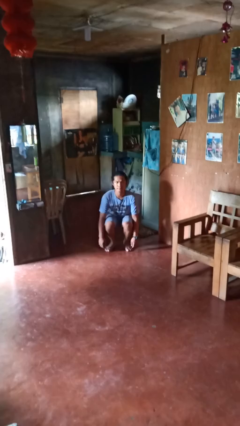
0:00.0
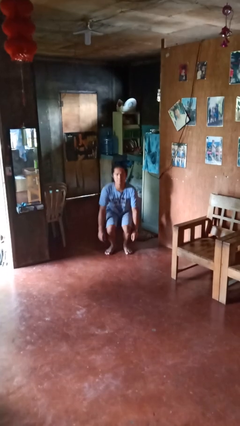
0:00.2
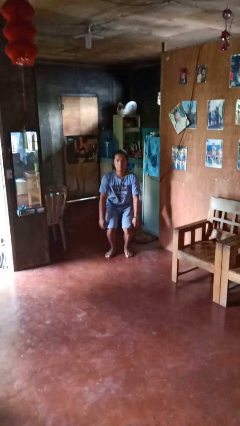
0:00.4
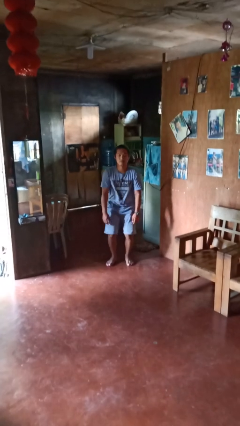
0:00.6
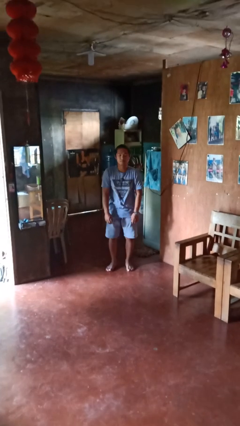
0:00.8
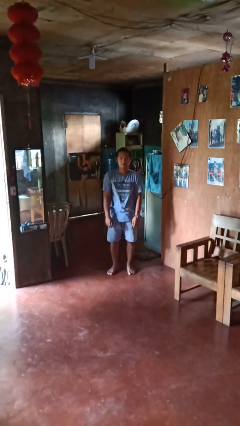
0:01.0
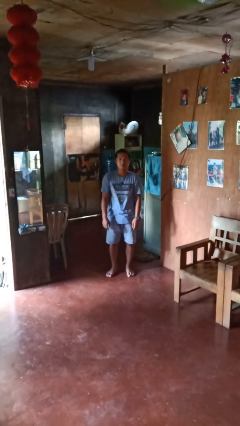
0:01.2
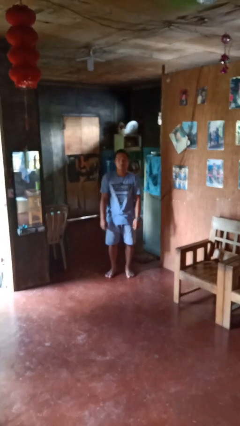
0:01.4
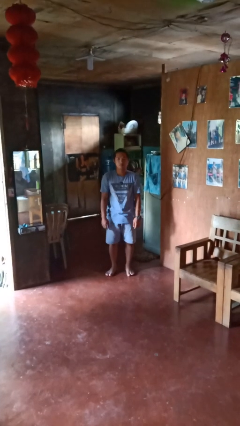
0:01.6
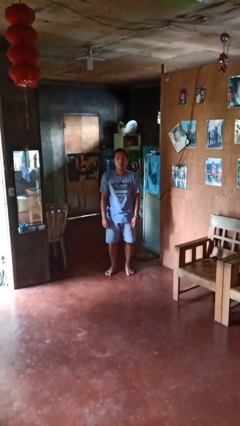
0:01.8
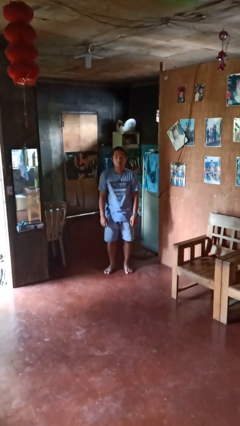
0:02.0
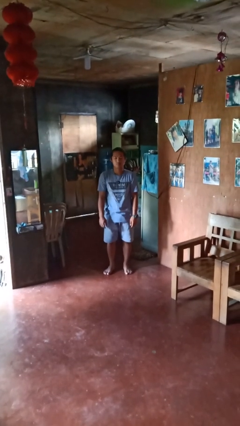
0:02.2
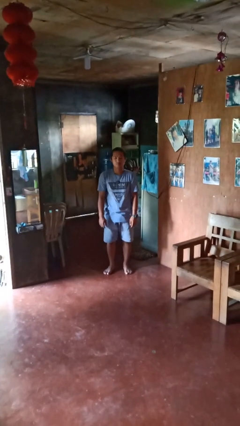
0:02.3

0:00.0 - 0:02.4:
person stands up

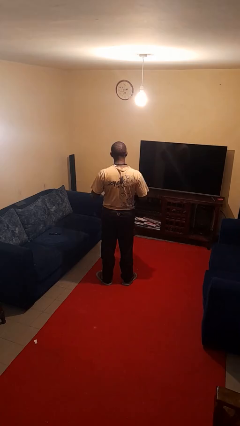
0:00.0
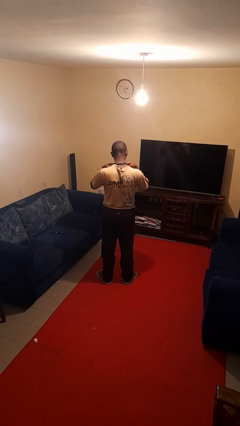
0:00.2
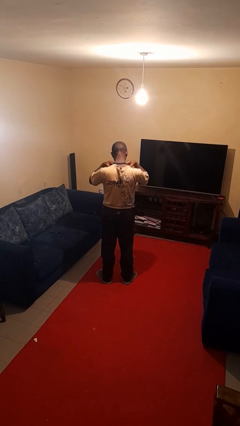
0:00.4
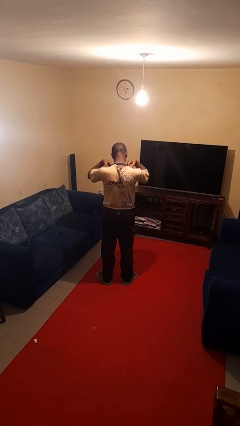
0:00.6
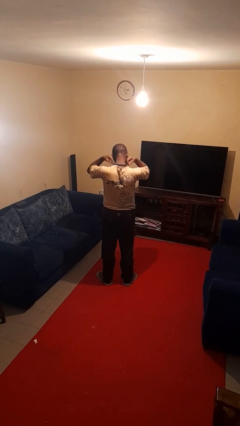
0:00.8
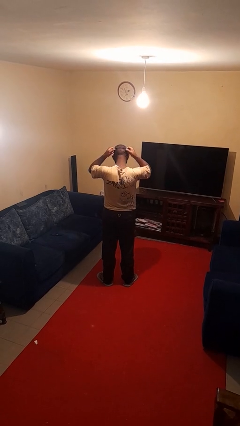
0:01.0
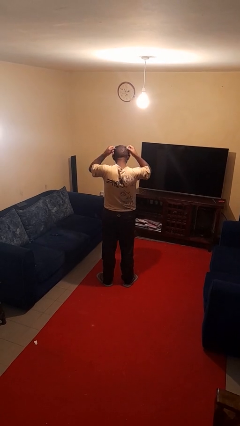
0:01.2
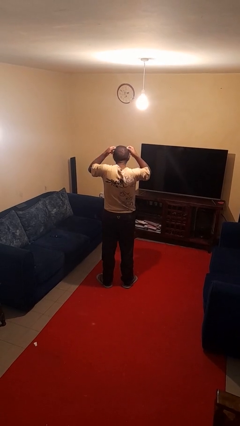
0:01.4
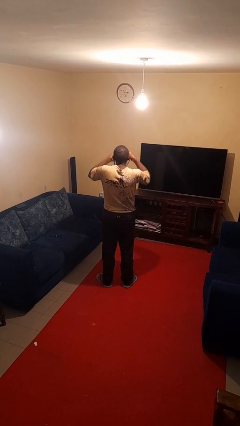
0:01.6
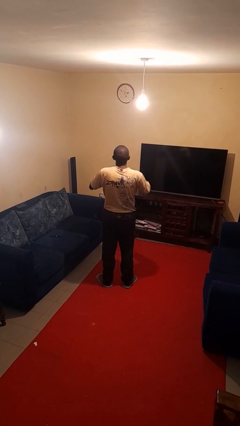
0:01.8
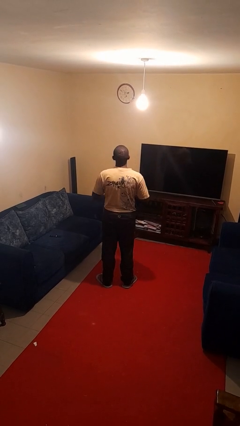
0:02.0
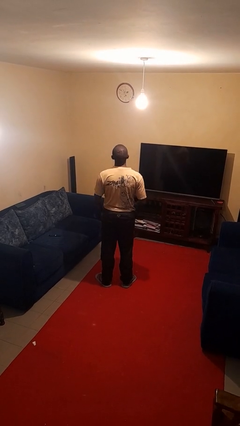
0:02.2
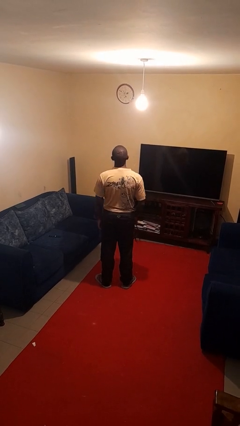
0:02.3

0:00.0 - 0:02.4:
person takes off necklace

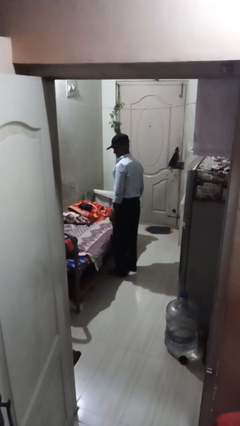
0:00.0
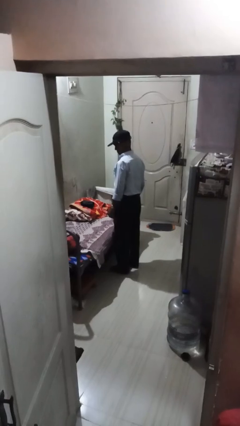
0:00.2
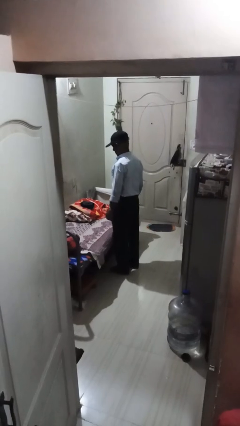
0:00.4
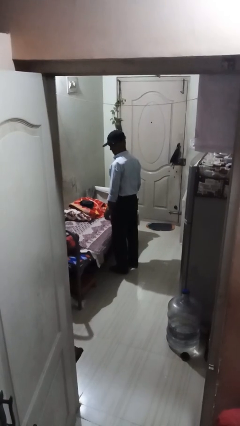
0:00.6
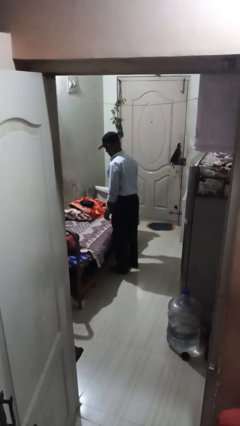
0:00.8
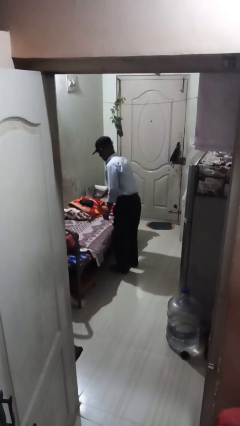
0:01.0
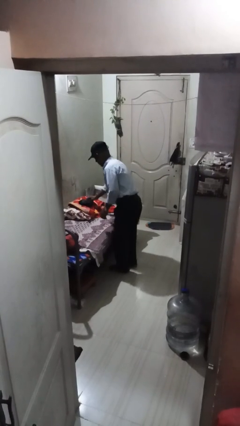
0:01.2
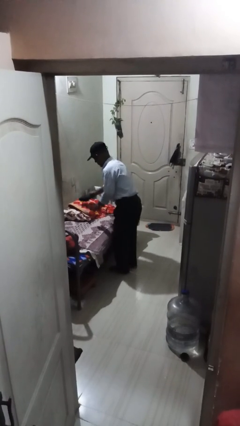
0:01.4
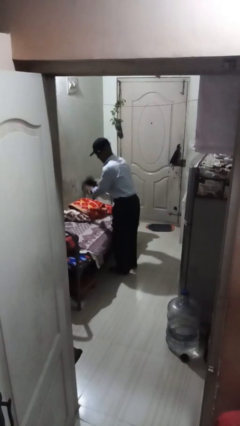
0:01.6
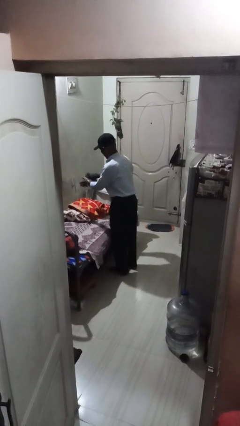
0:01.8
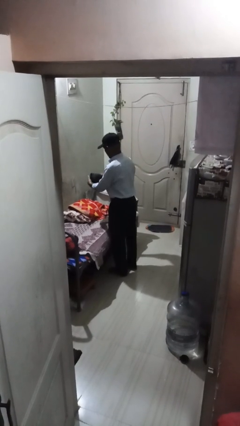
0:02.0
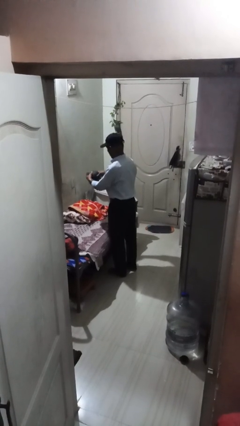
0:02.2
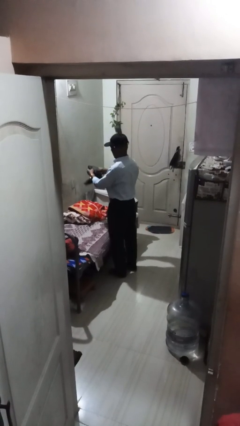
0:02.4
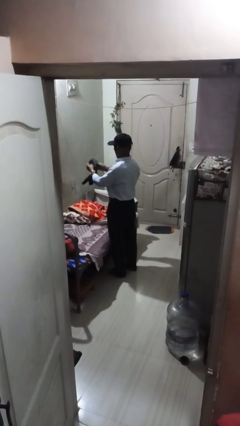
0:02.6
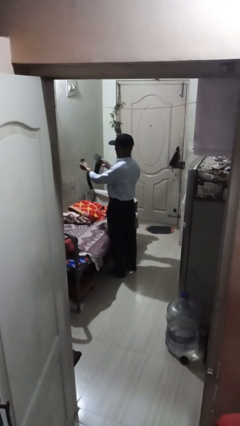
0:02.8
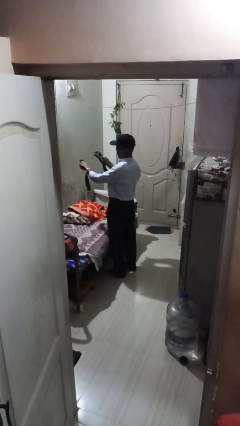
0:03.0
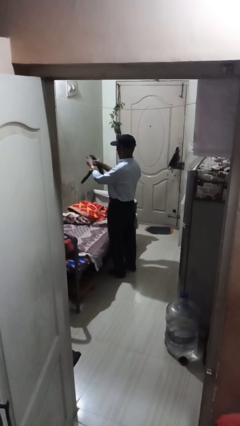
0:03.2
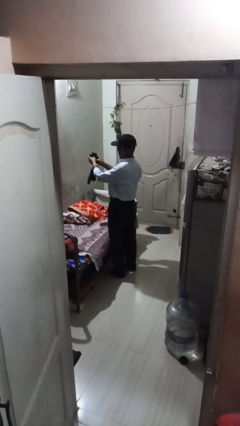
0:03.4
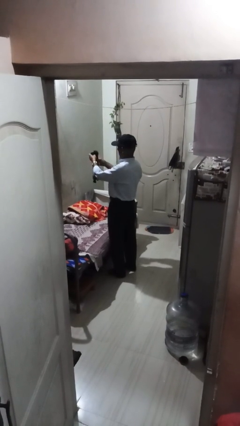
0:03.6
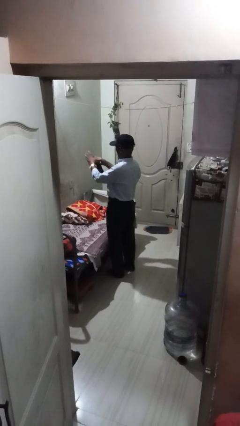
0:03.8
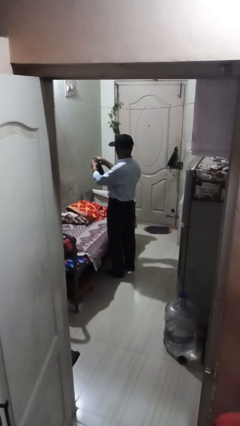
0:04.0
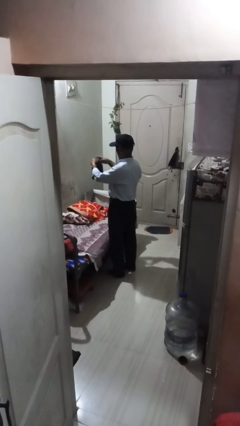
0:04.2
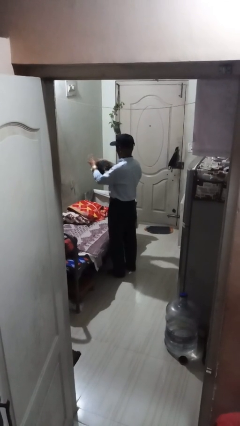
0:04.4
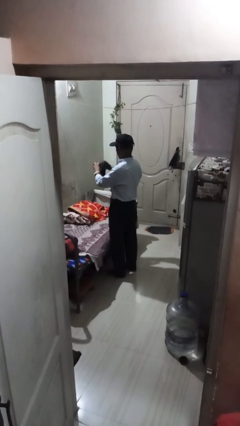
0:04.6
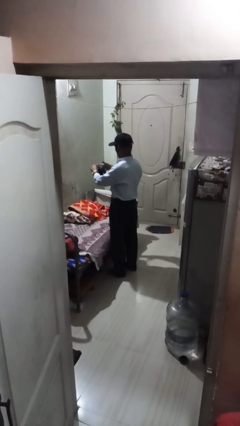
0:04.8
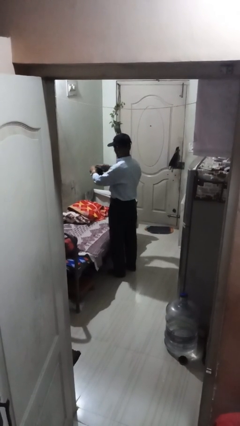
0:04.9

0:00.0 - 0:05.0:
person folds socks

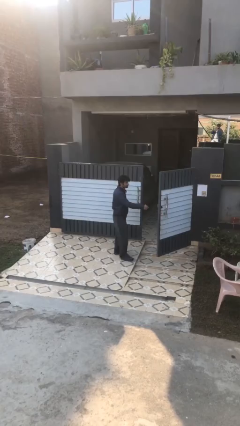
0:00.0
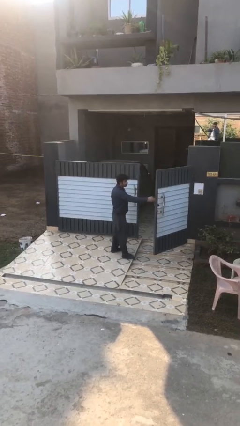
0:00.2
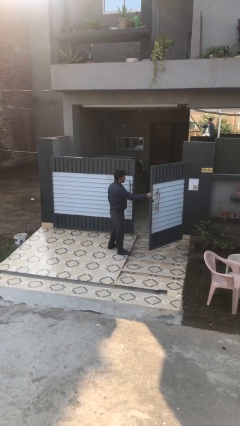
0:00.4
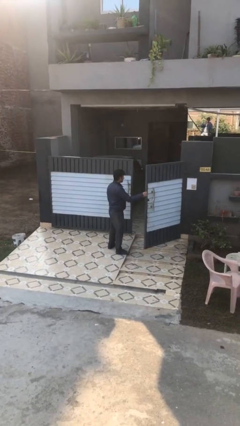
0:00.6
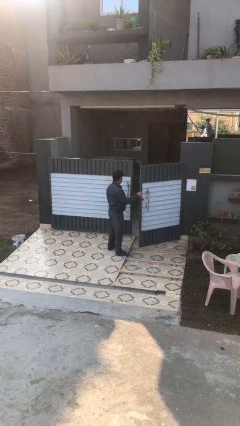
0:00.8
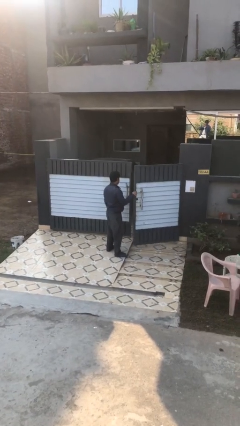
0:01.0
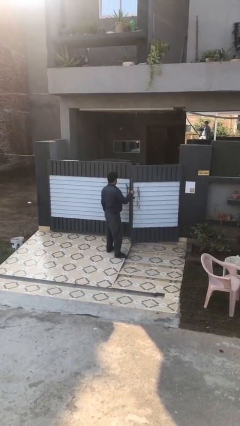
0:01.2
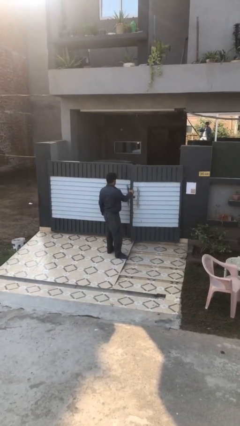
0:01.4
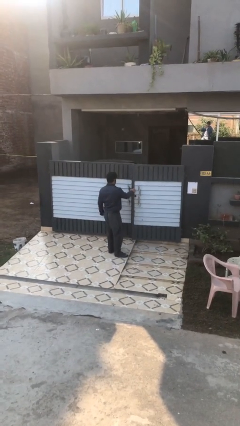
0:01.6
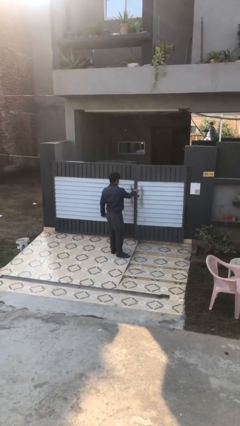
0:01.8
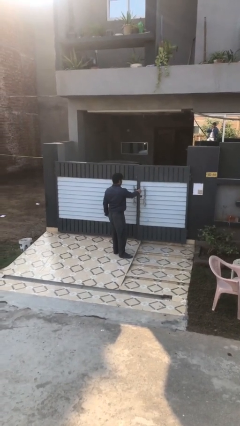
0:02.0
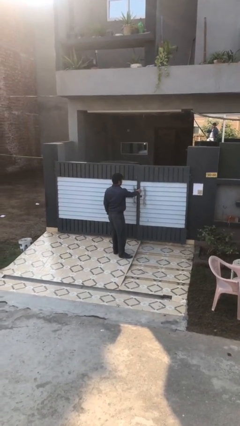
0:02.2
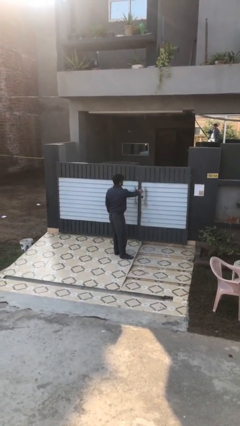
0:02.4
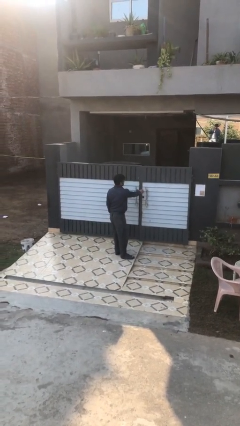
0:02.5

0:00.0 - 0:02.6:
person closes facility door

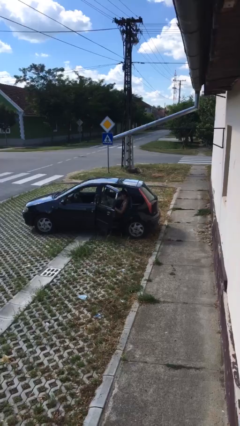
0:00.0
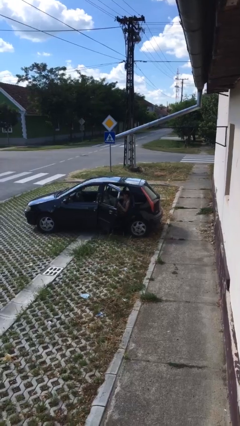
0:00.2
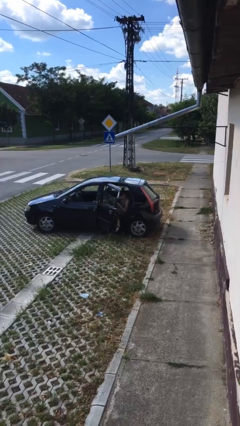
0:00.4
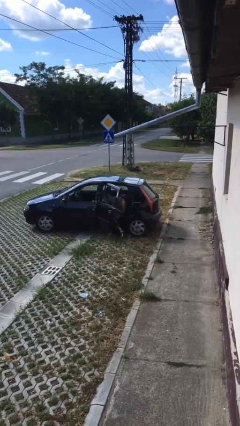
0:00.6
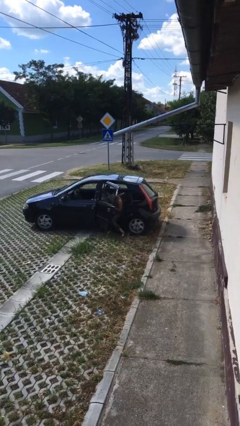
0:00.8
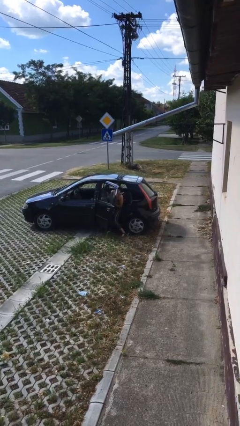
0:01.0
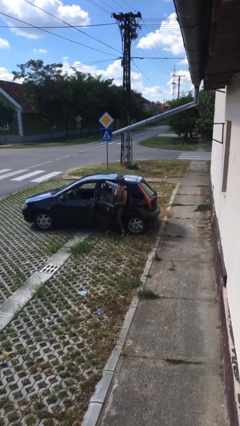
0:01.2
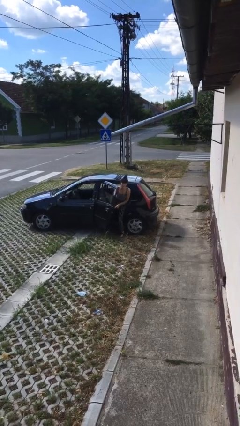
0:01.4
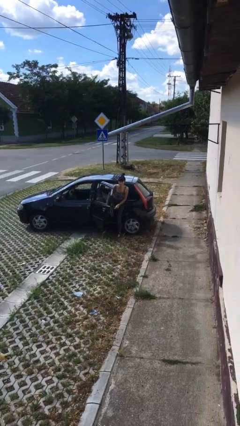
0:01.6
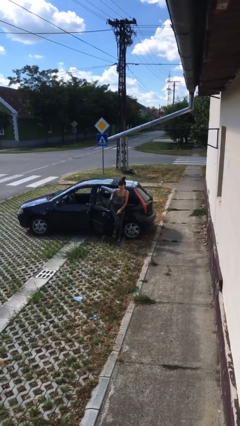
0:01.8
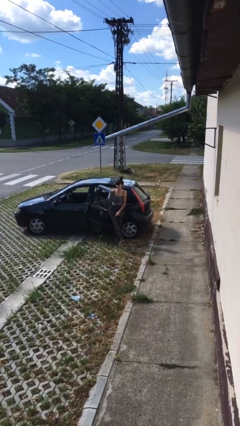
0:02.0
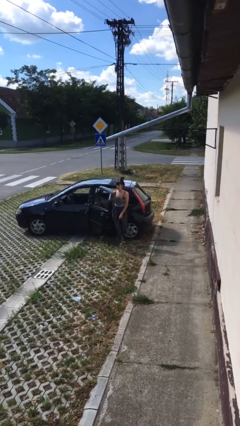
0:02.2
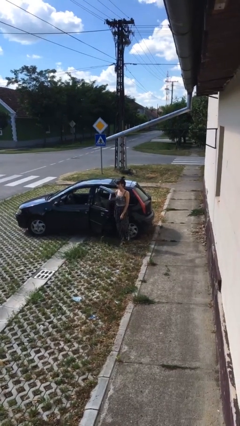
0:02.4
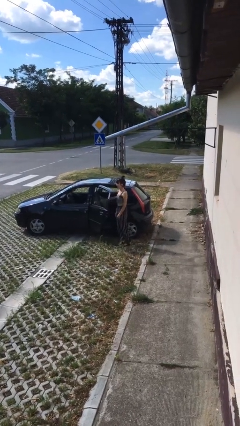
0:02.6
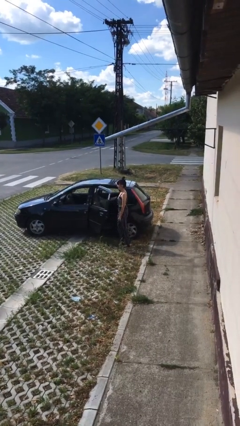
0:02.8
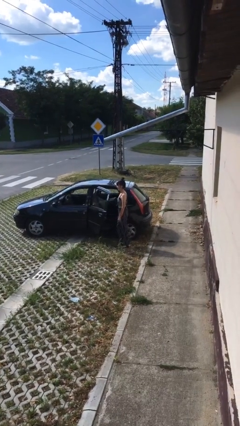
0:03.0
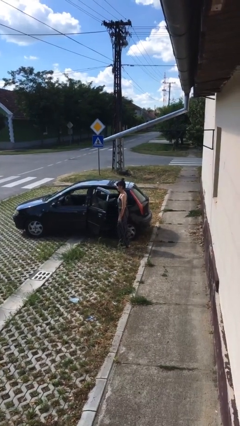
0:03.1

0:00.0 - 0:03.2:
person exits car

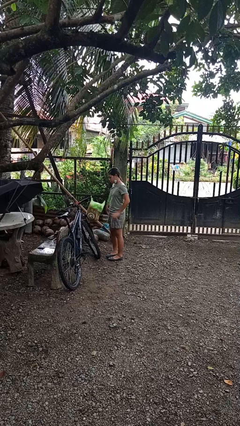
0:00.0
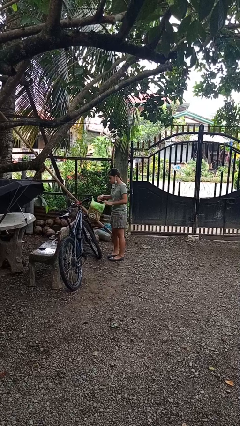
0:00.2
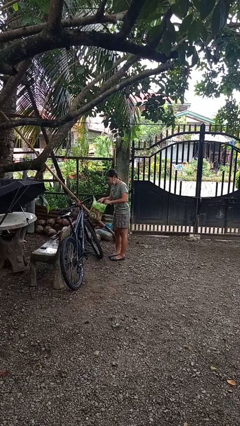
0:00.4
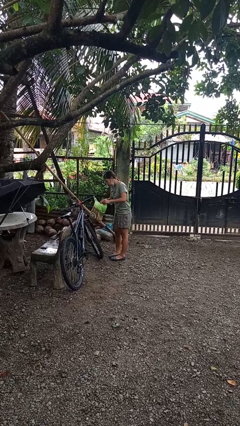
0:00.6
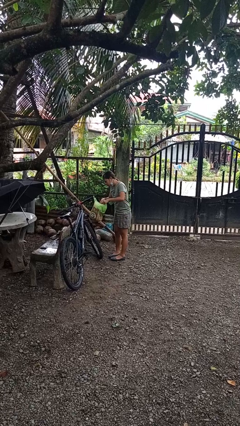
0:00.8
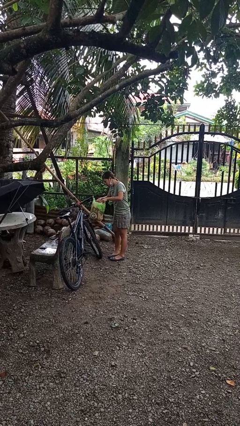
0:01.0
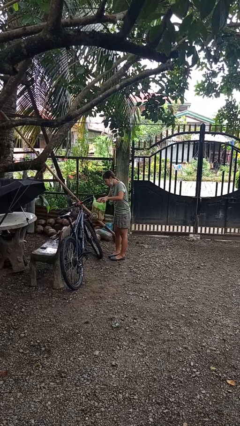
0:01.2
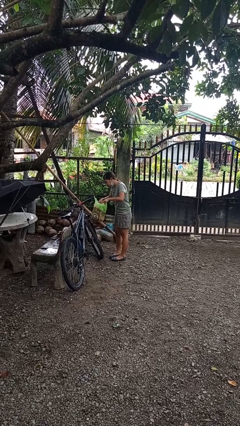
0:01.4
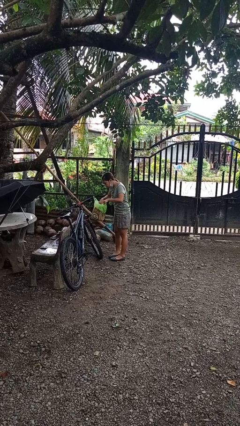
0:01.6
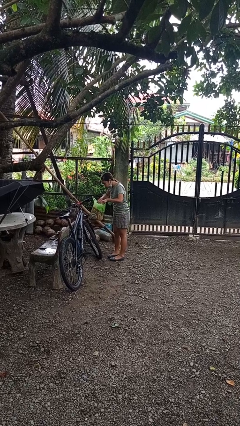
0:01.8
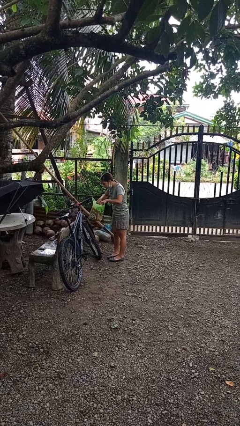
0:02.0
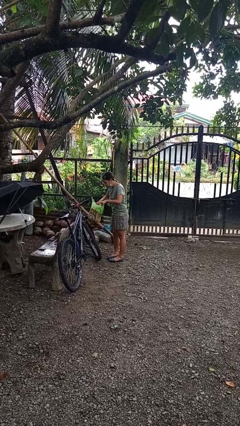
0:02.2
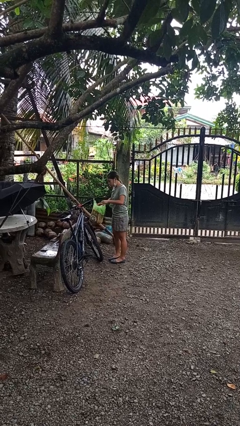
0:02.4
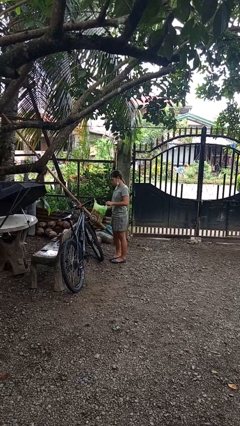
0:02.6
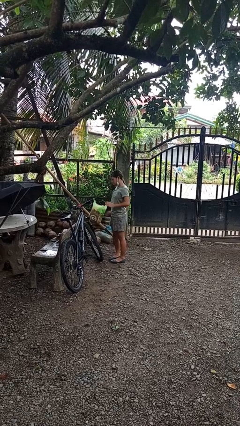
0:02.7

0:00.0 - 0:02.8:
person searches in bag
